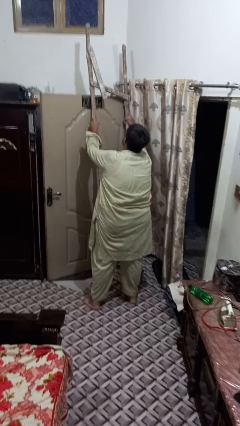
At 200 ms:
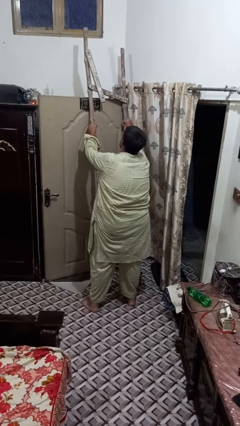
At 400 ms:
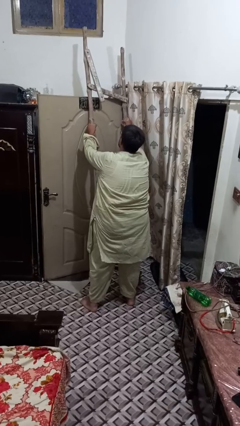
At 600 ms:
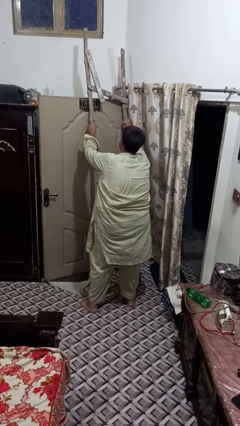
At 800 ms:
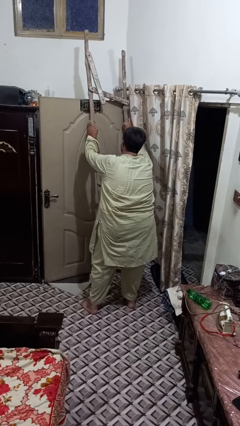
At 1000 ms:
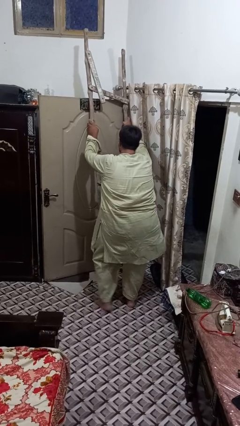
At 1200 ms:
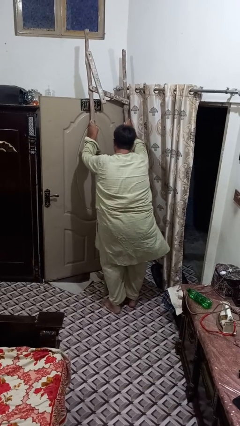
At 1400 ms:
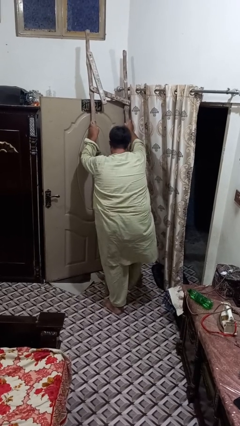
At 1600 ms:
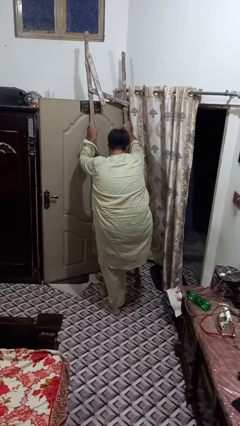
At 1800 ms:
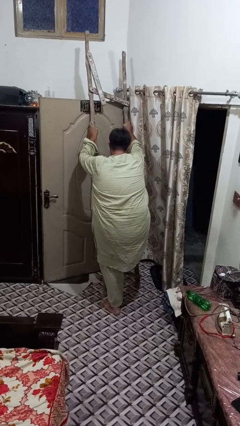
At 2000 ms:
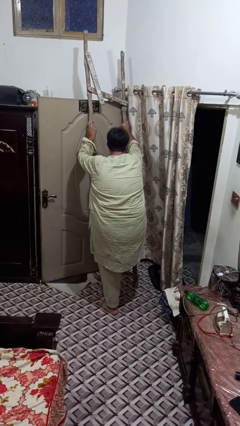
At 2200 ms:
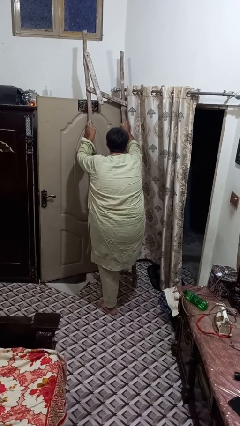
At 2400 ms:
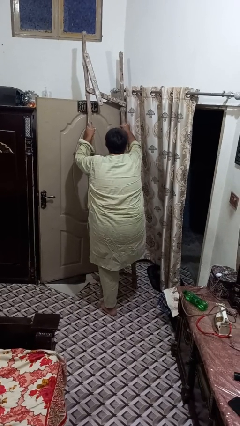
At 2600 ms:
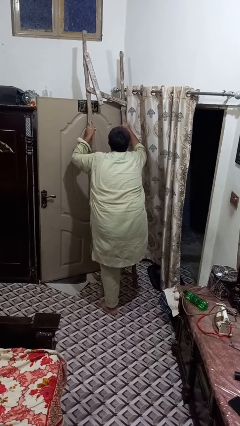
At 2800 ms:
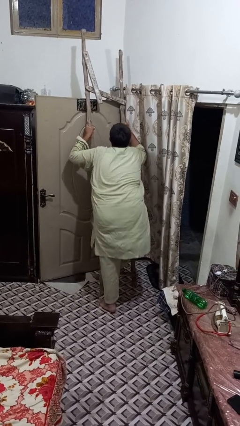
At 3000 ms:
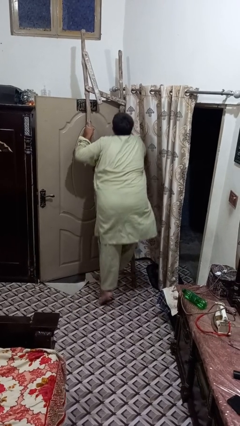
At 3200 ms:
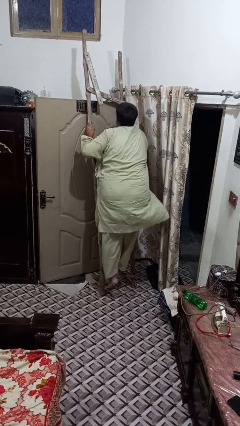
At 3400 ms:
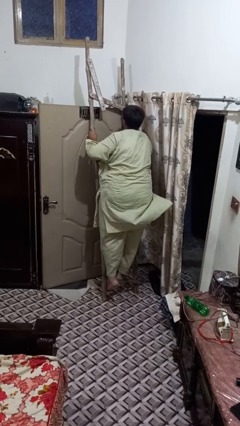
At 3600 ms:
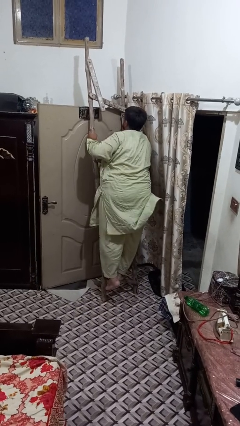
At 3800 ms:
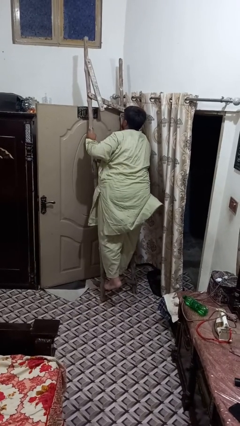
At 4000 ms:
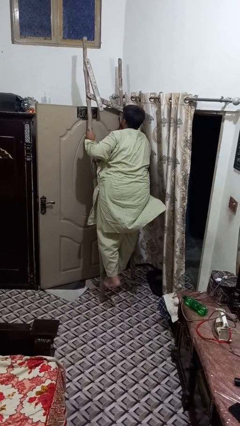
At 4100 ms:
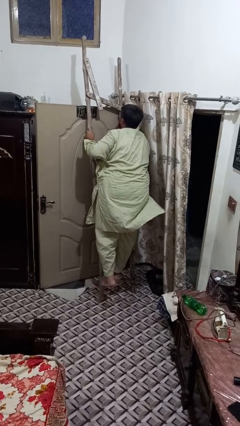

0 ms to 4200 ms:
person climbs up ladder

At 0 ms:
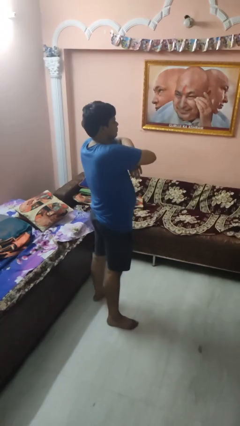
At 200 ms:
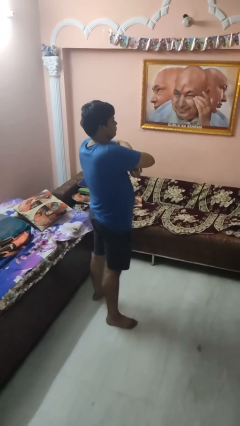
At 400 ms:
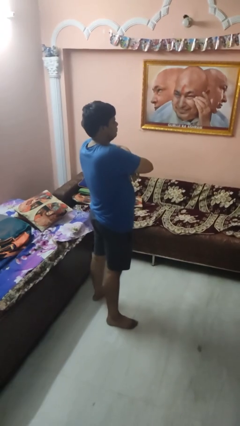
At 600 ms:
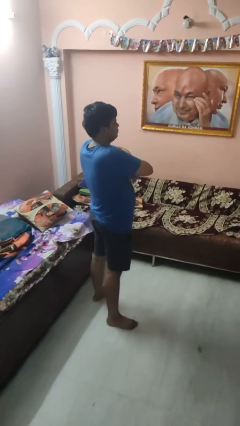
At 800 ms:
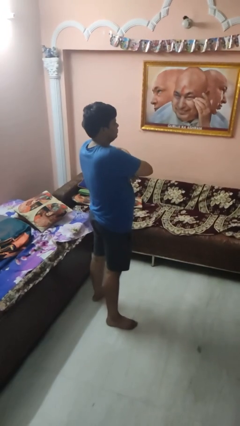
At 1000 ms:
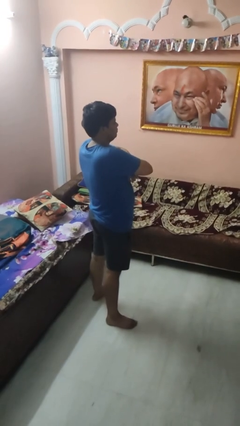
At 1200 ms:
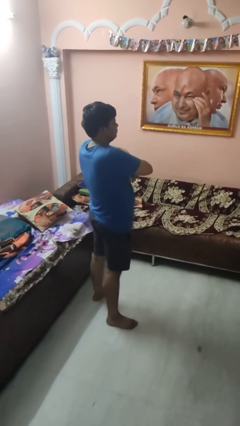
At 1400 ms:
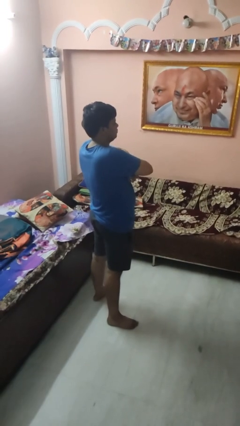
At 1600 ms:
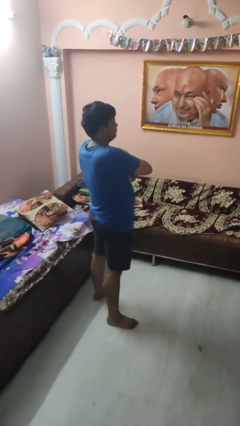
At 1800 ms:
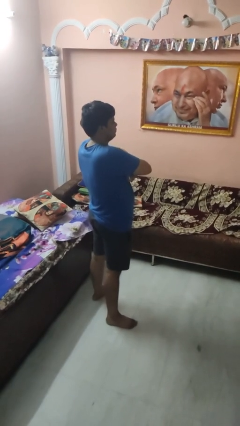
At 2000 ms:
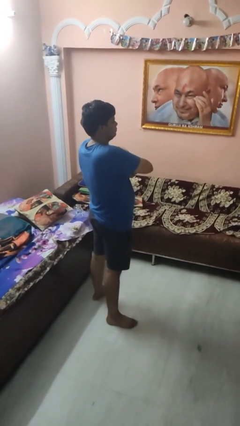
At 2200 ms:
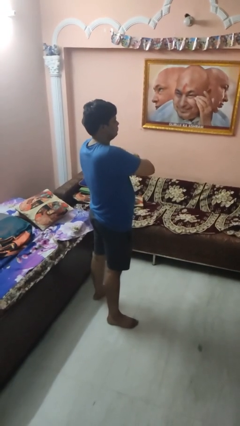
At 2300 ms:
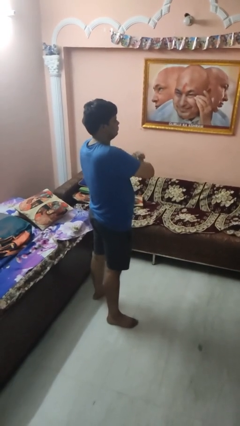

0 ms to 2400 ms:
person crosses arms

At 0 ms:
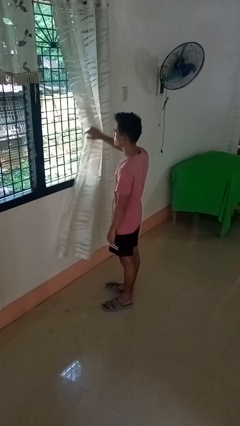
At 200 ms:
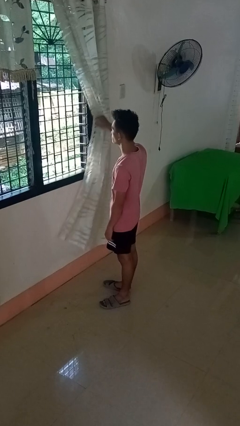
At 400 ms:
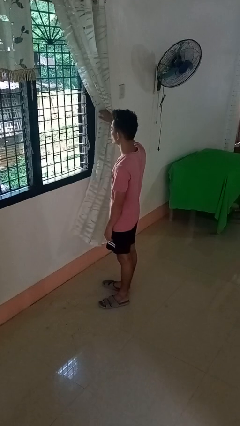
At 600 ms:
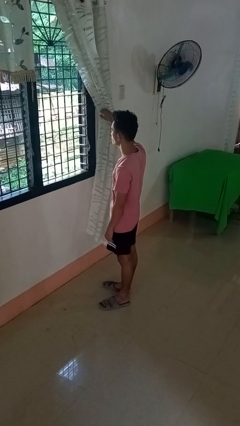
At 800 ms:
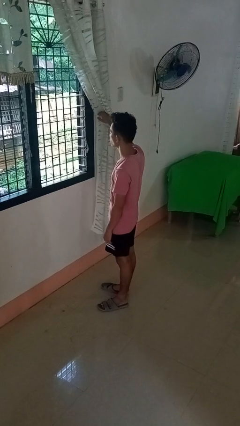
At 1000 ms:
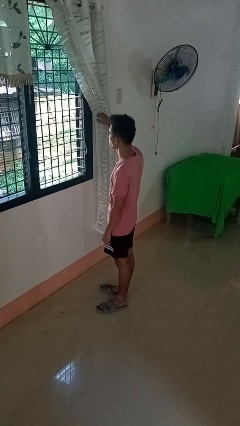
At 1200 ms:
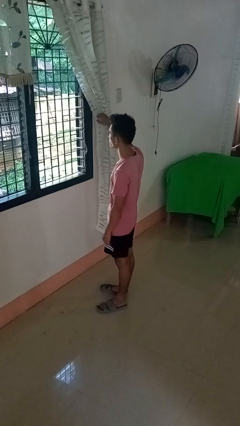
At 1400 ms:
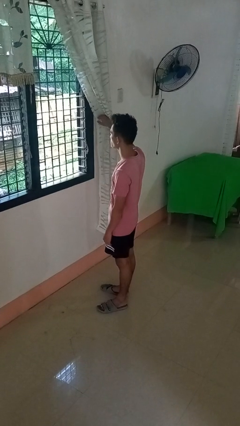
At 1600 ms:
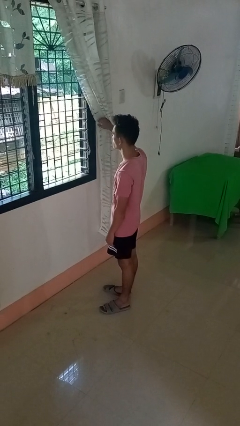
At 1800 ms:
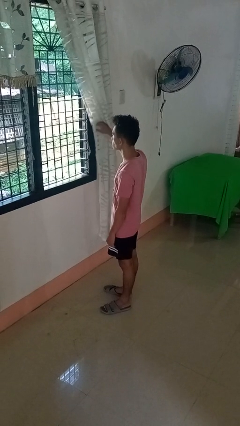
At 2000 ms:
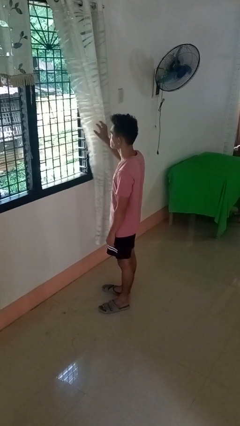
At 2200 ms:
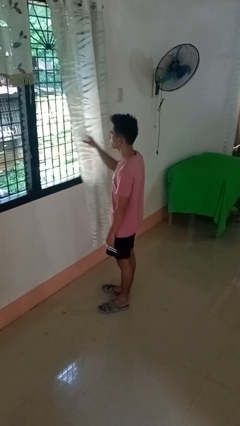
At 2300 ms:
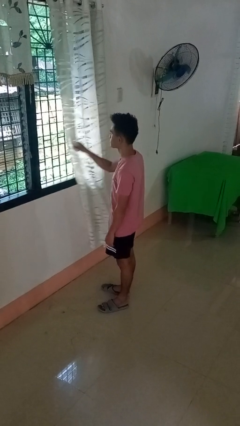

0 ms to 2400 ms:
person opens curtains

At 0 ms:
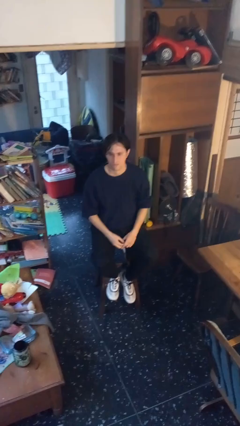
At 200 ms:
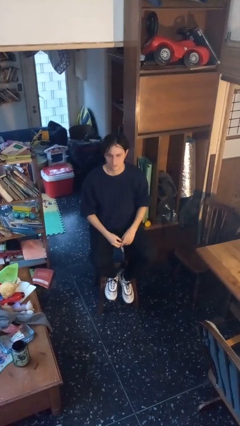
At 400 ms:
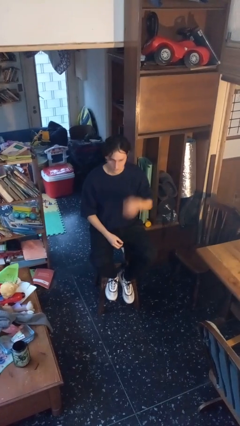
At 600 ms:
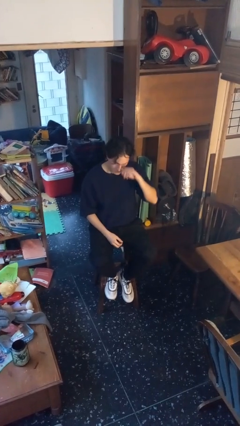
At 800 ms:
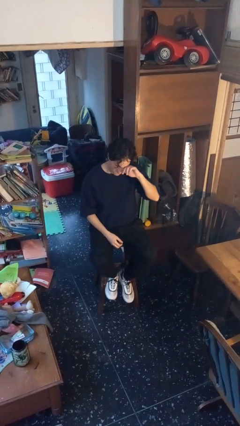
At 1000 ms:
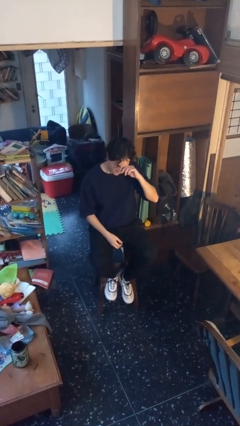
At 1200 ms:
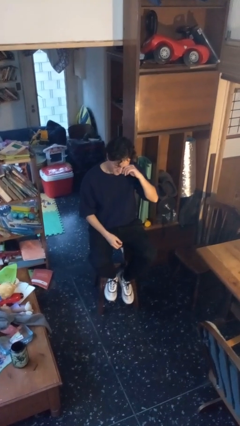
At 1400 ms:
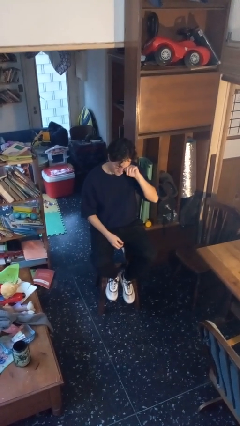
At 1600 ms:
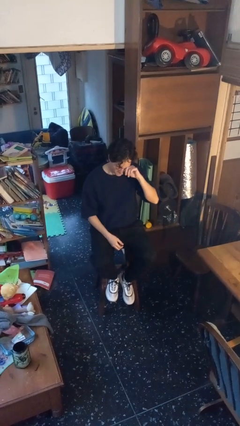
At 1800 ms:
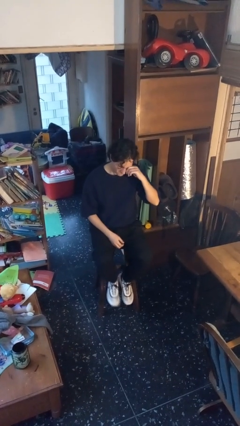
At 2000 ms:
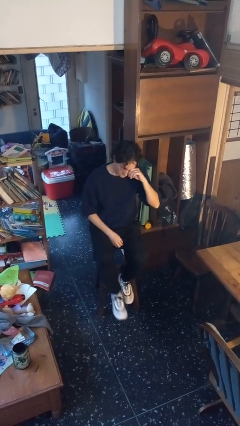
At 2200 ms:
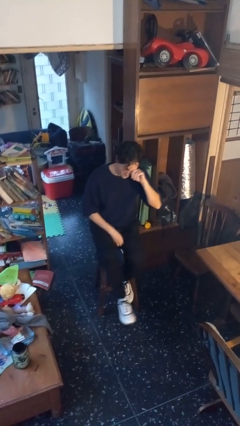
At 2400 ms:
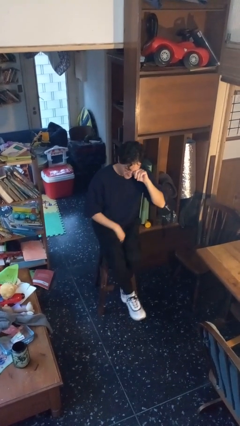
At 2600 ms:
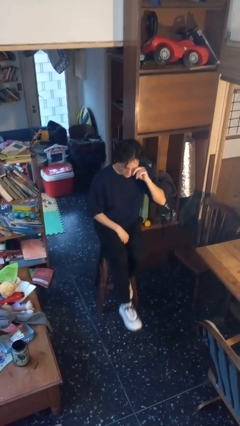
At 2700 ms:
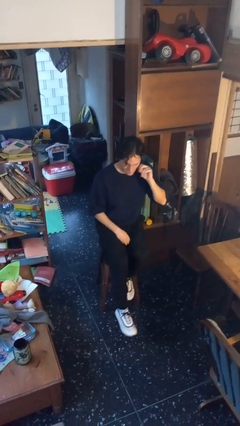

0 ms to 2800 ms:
person rubs eyes

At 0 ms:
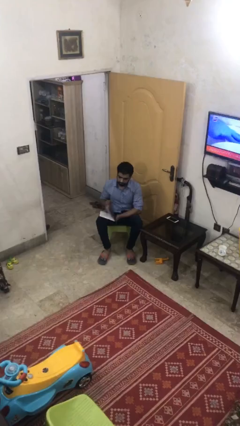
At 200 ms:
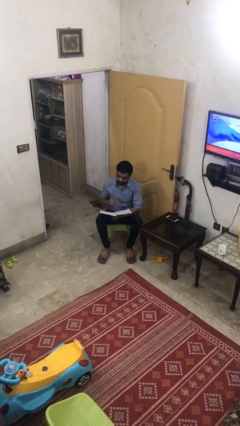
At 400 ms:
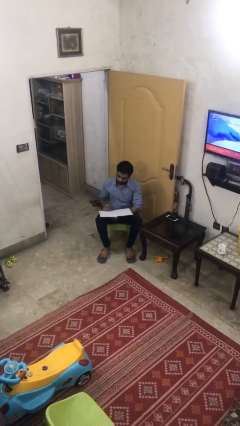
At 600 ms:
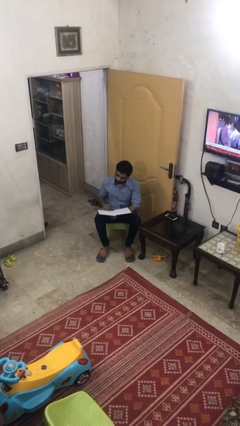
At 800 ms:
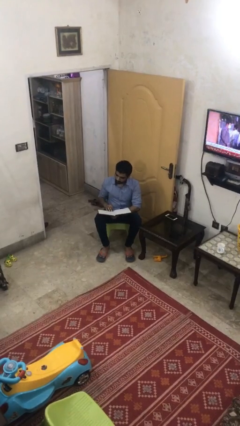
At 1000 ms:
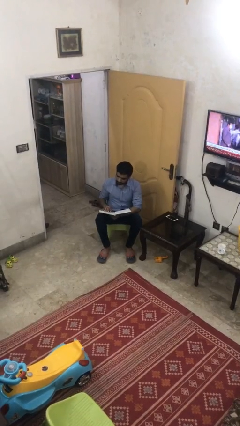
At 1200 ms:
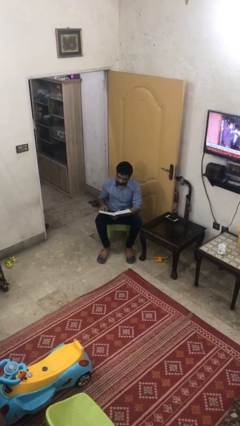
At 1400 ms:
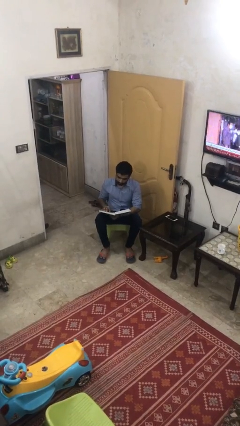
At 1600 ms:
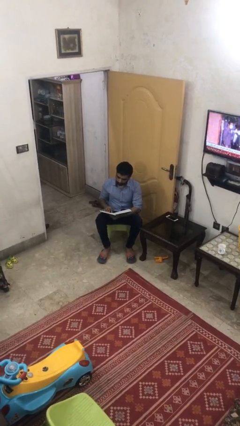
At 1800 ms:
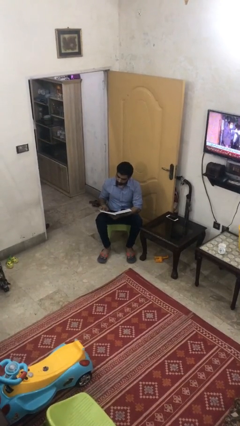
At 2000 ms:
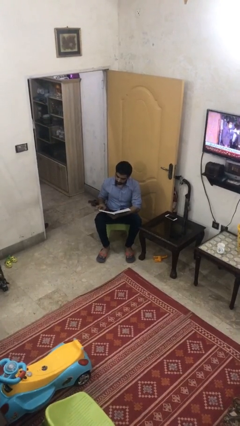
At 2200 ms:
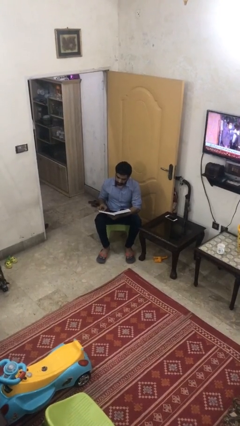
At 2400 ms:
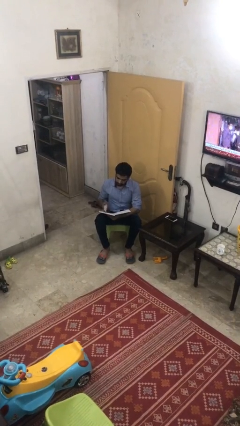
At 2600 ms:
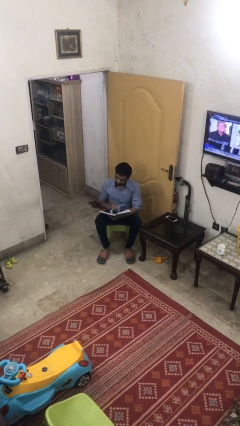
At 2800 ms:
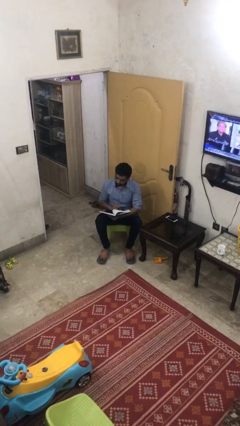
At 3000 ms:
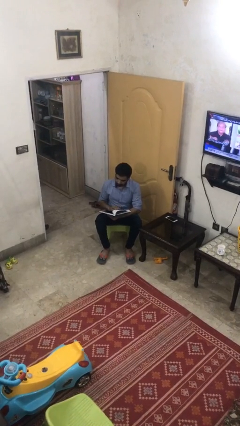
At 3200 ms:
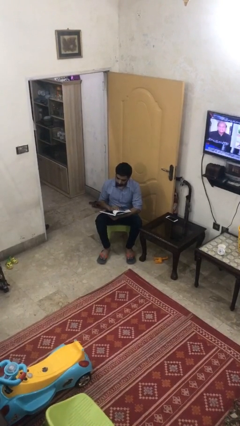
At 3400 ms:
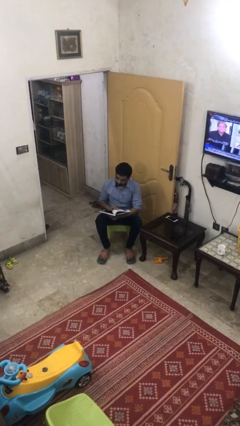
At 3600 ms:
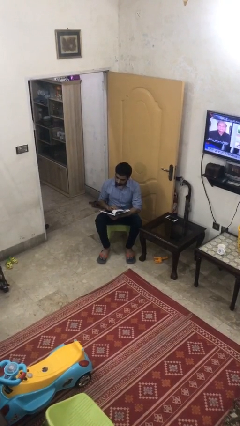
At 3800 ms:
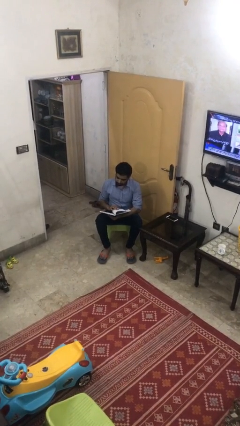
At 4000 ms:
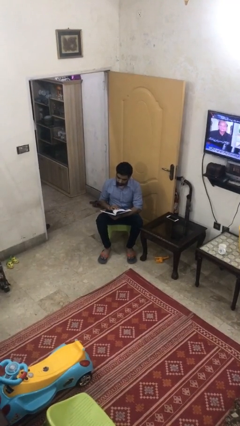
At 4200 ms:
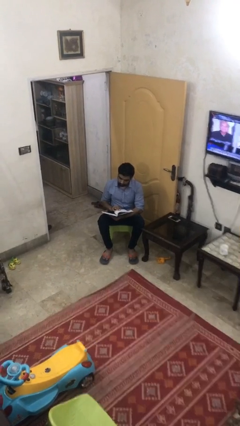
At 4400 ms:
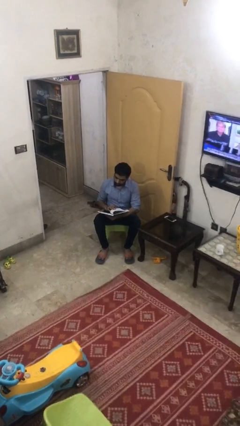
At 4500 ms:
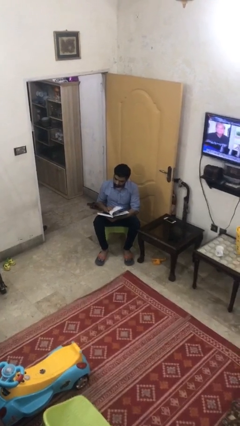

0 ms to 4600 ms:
person reads document

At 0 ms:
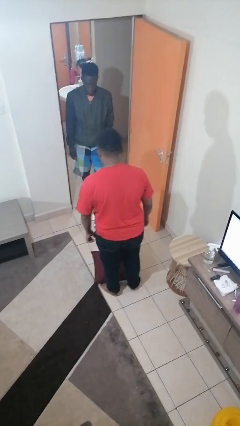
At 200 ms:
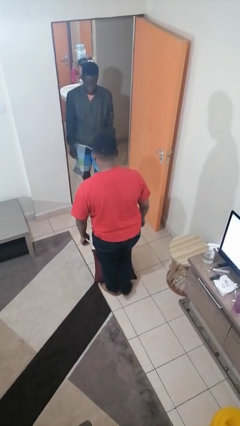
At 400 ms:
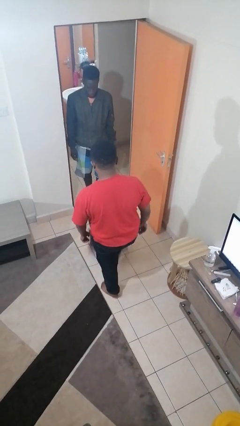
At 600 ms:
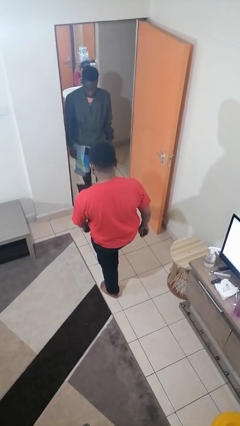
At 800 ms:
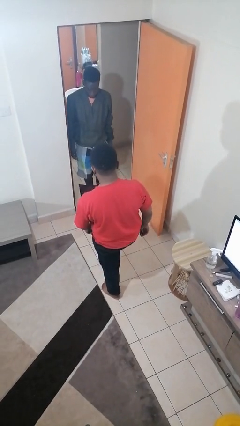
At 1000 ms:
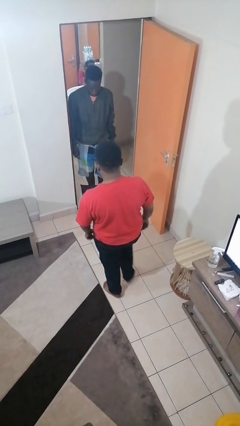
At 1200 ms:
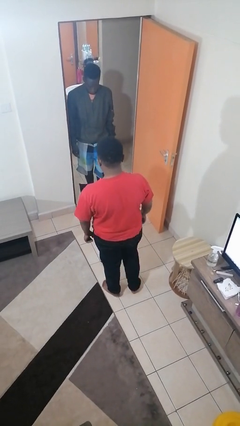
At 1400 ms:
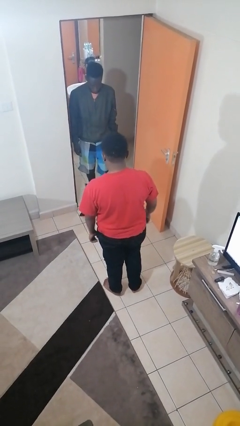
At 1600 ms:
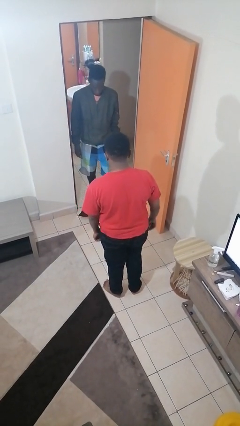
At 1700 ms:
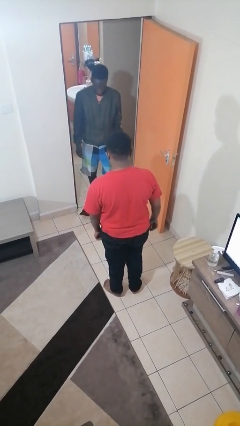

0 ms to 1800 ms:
person kicks object to person
